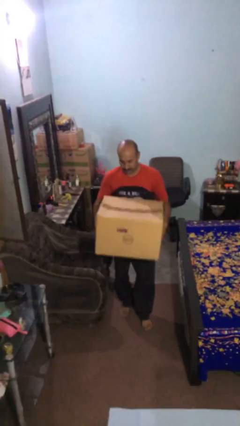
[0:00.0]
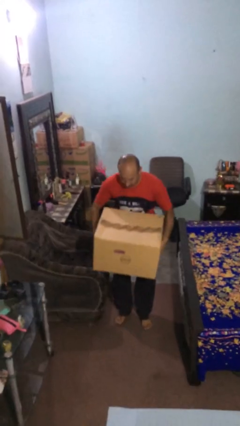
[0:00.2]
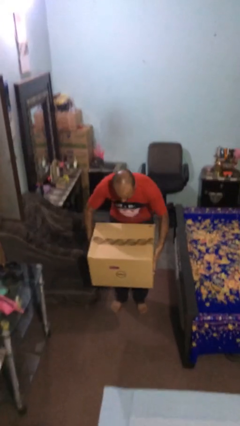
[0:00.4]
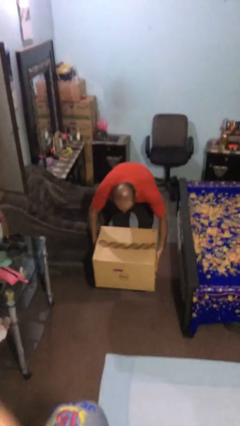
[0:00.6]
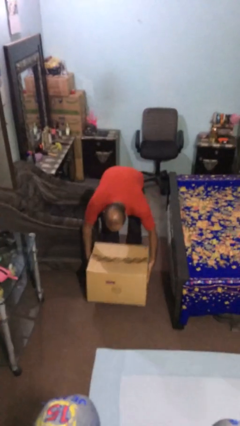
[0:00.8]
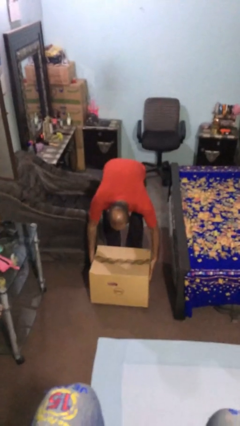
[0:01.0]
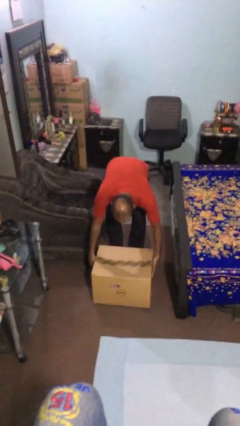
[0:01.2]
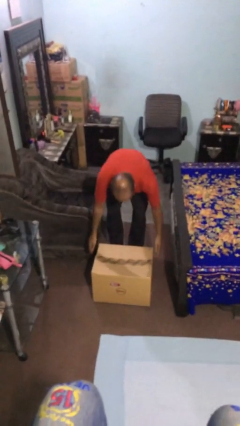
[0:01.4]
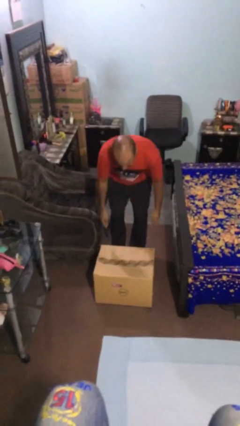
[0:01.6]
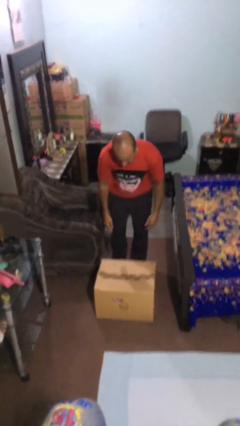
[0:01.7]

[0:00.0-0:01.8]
person puts down object on floor

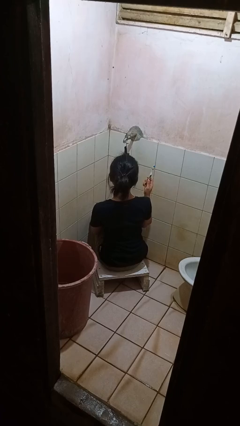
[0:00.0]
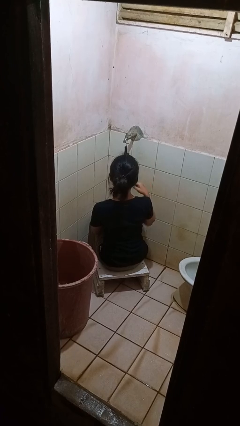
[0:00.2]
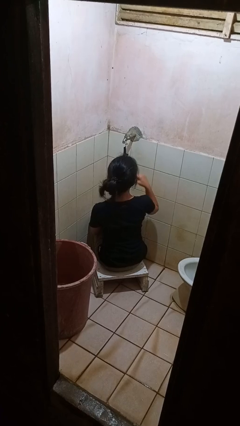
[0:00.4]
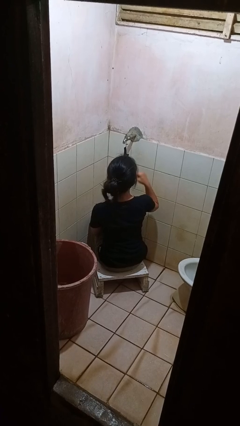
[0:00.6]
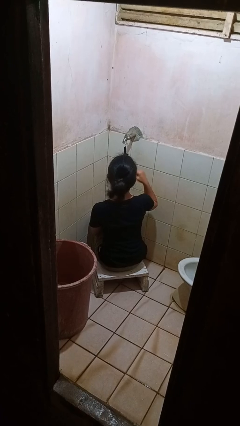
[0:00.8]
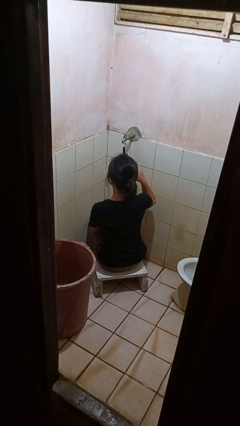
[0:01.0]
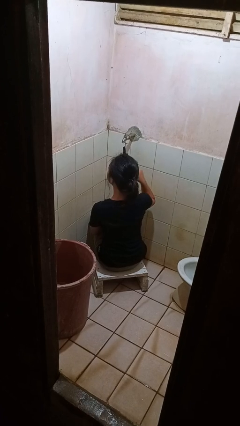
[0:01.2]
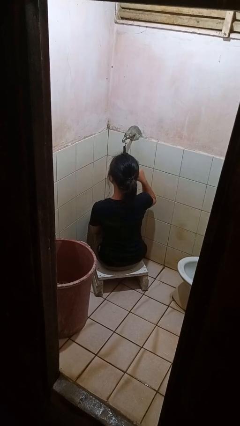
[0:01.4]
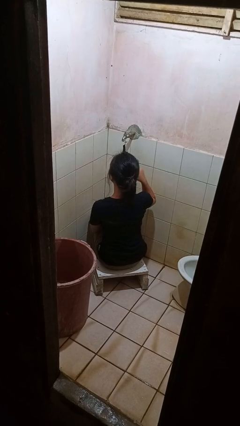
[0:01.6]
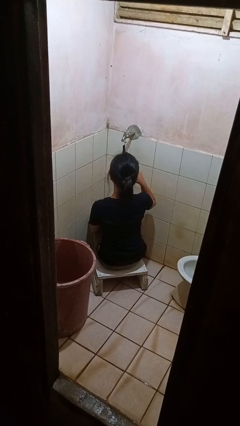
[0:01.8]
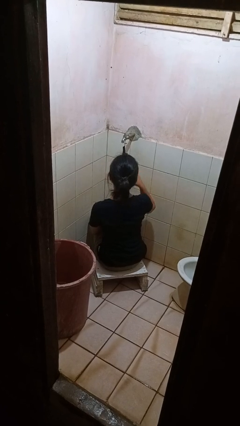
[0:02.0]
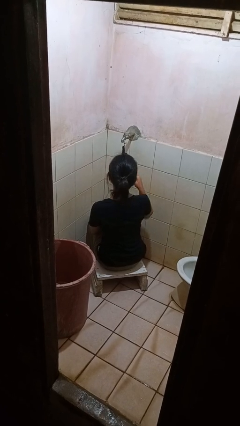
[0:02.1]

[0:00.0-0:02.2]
person brushes teeth

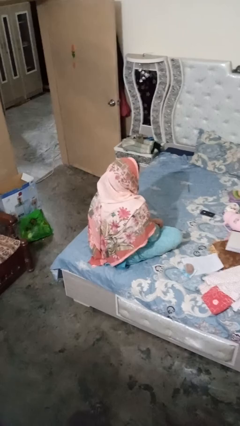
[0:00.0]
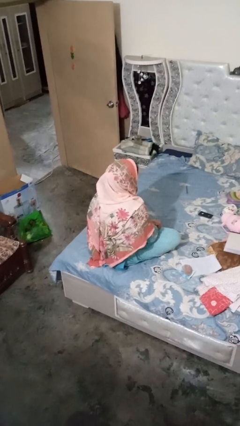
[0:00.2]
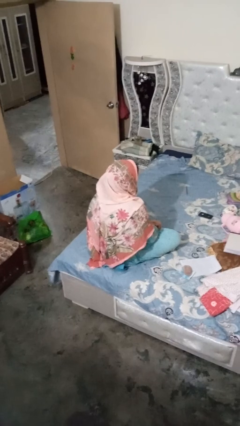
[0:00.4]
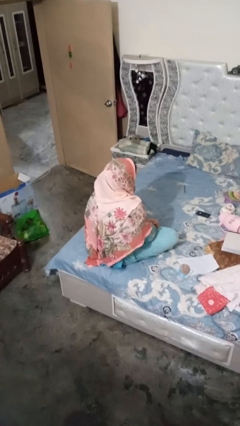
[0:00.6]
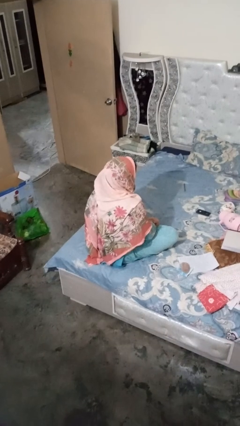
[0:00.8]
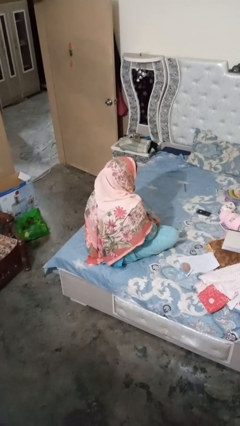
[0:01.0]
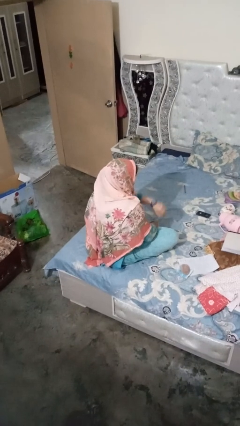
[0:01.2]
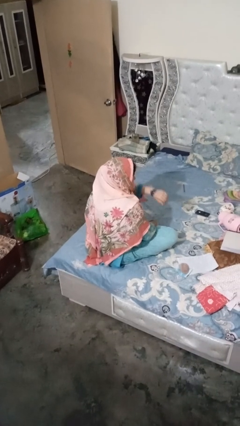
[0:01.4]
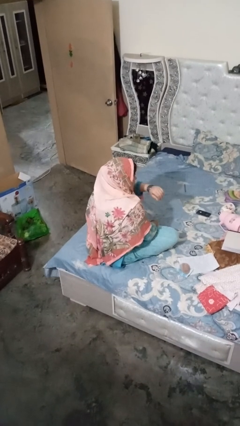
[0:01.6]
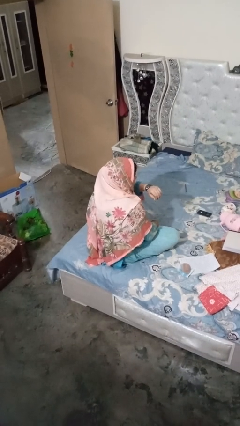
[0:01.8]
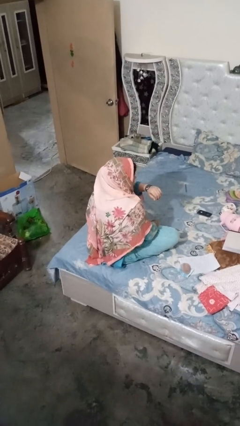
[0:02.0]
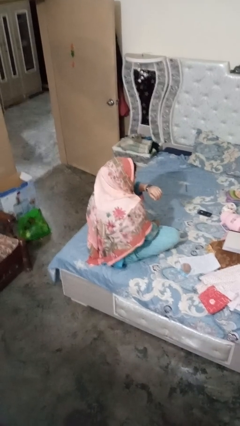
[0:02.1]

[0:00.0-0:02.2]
person gestures watch closely

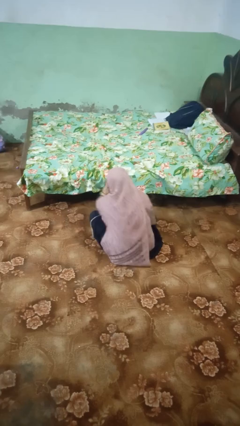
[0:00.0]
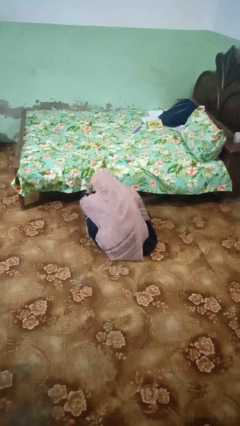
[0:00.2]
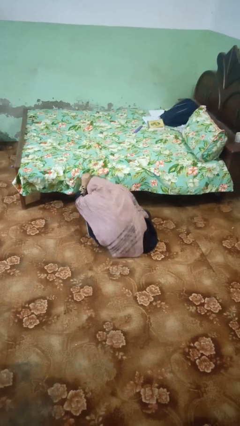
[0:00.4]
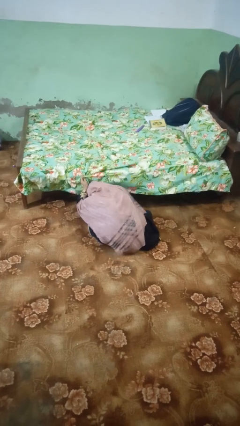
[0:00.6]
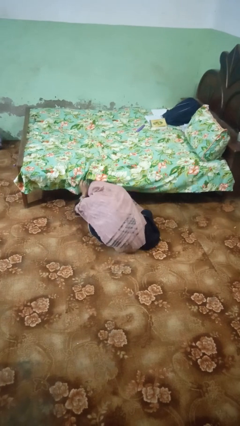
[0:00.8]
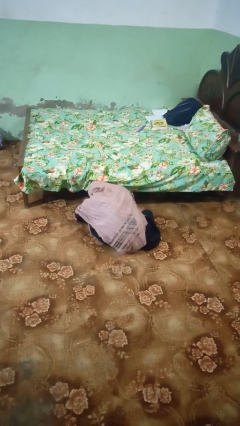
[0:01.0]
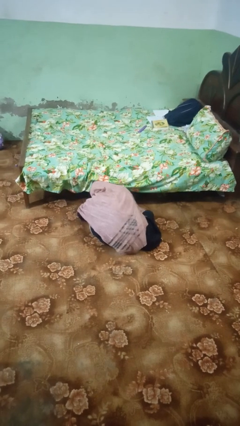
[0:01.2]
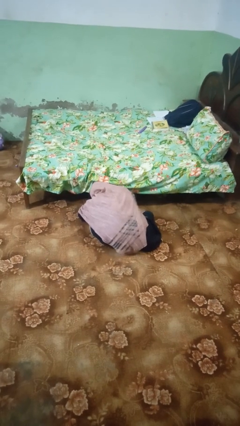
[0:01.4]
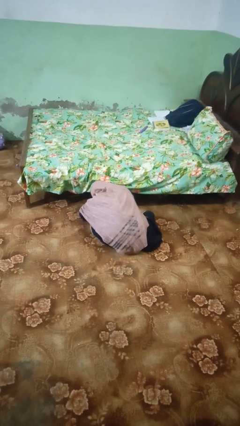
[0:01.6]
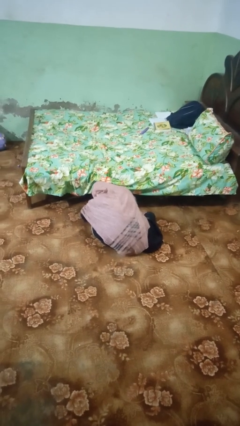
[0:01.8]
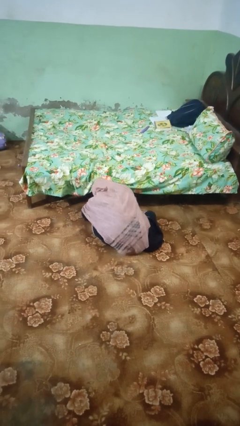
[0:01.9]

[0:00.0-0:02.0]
person searches under bed

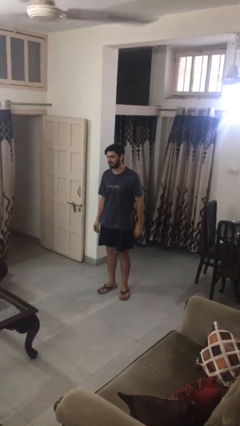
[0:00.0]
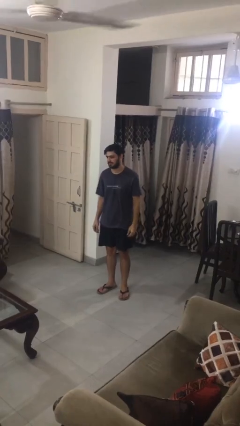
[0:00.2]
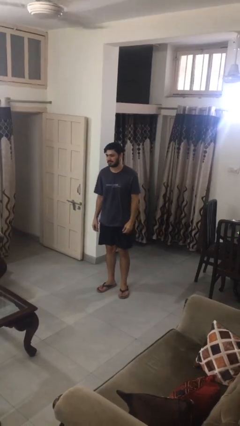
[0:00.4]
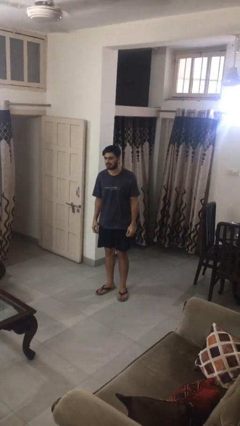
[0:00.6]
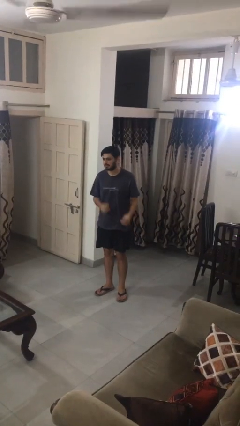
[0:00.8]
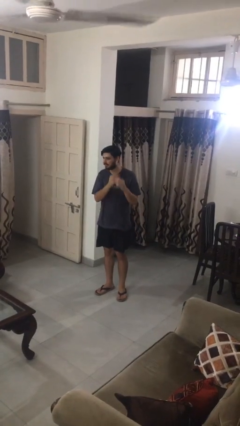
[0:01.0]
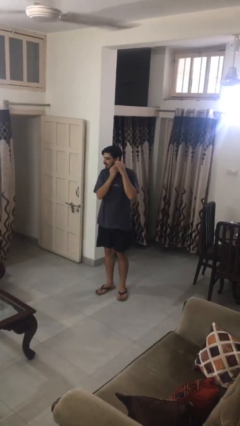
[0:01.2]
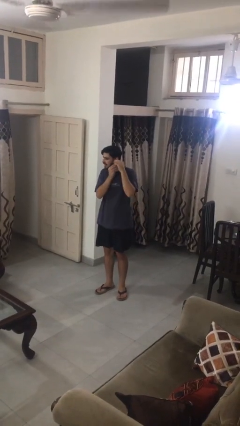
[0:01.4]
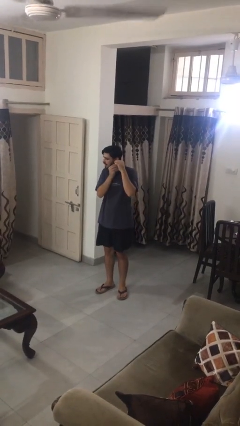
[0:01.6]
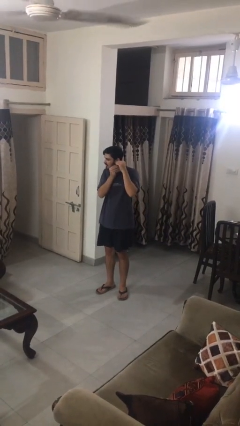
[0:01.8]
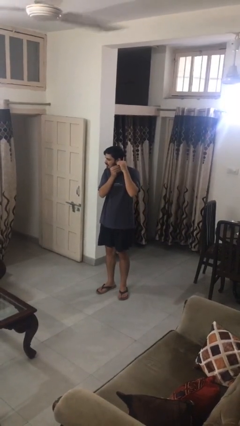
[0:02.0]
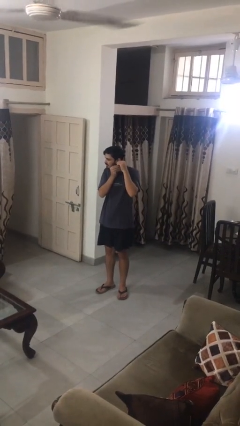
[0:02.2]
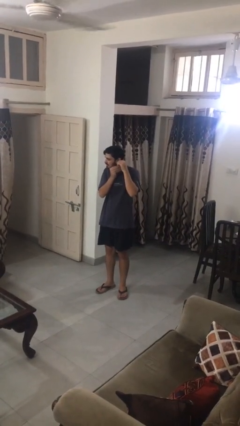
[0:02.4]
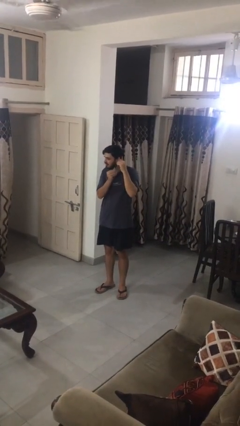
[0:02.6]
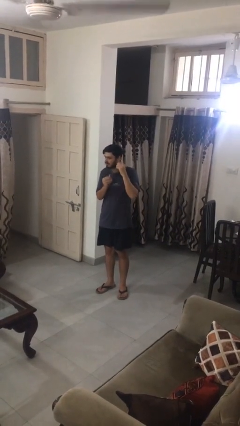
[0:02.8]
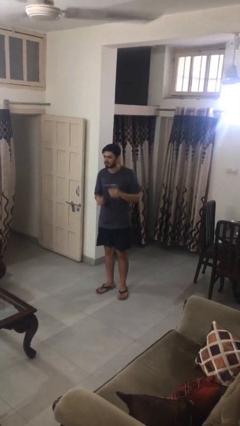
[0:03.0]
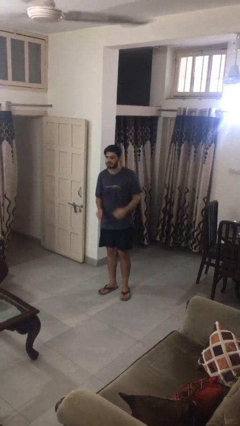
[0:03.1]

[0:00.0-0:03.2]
person takes off earrings

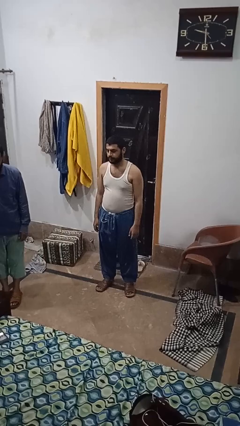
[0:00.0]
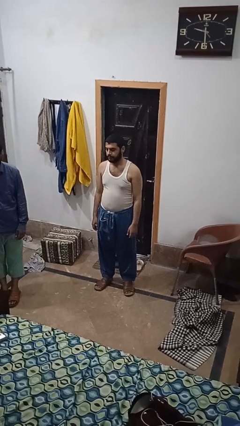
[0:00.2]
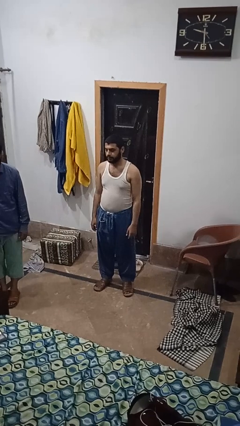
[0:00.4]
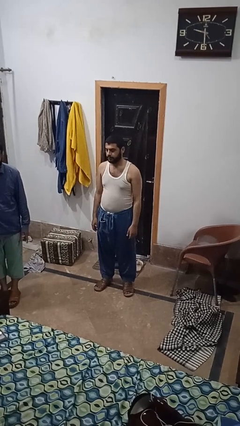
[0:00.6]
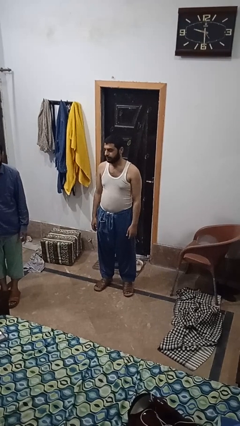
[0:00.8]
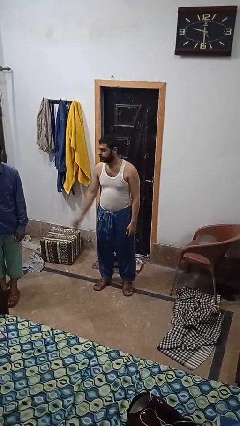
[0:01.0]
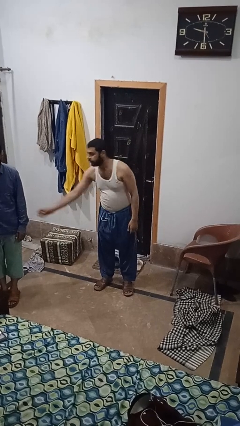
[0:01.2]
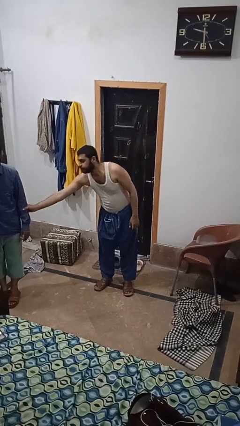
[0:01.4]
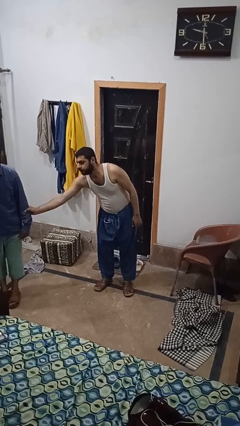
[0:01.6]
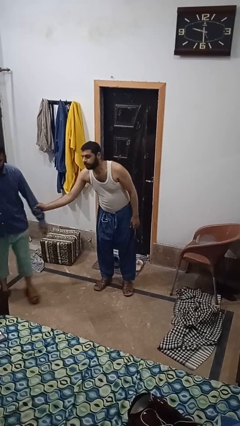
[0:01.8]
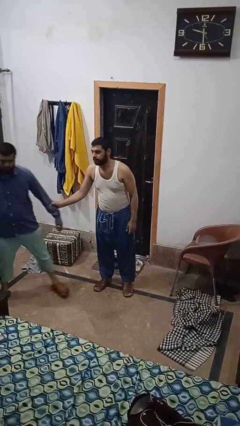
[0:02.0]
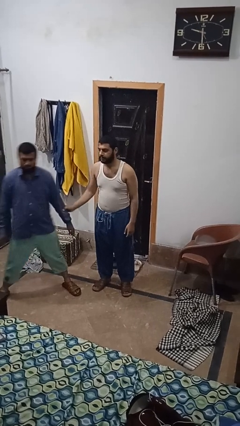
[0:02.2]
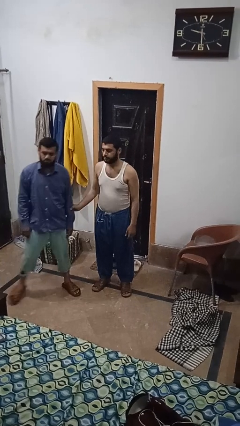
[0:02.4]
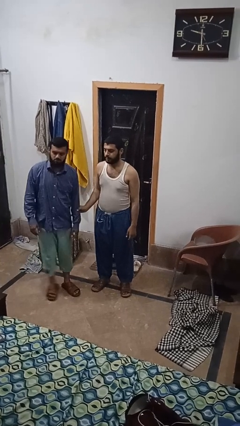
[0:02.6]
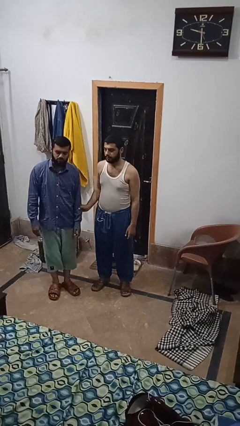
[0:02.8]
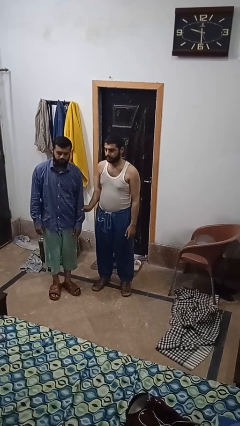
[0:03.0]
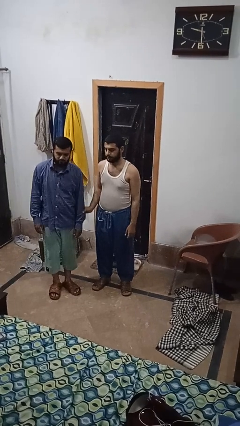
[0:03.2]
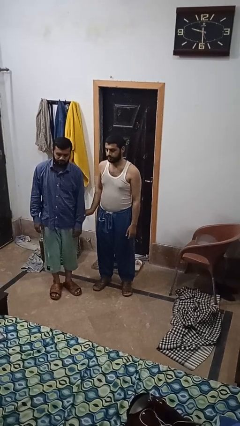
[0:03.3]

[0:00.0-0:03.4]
person grabs person by forearm

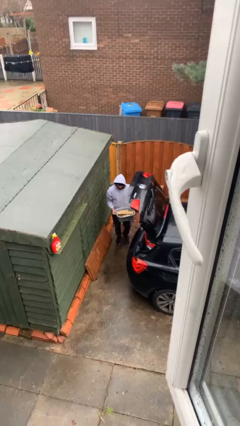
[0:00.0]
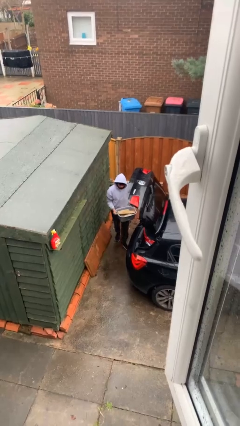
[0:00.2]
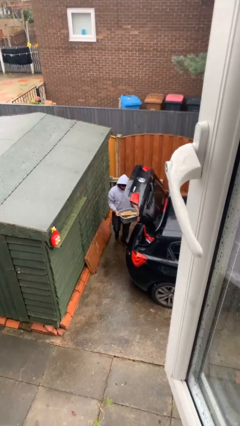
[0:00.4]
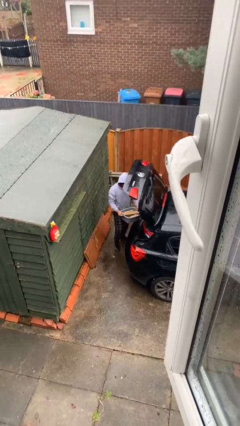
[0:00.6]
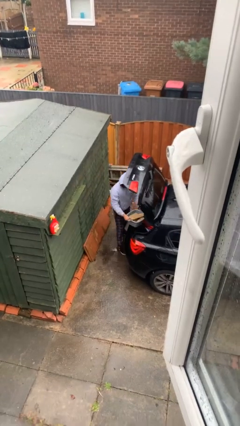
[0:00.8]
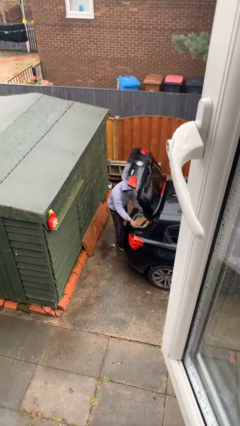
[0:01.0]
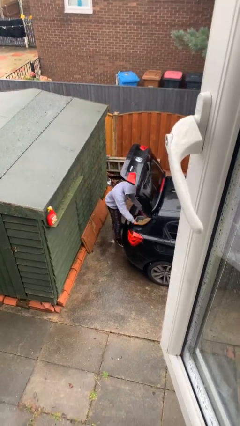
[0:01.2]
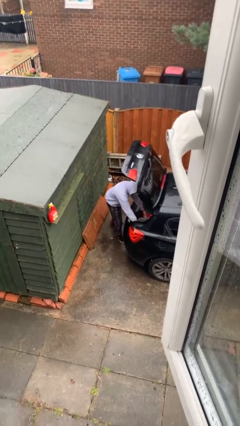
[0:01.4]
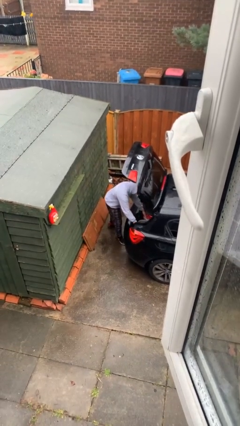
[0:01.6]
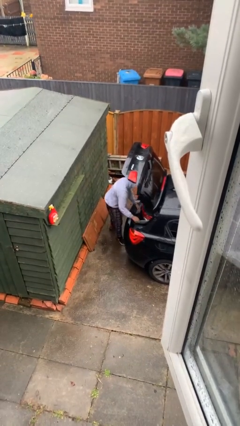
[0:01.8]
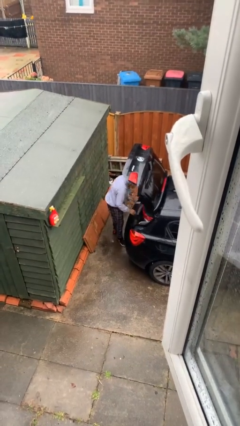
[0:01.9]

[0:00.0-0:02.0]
person loads car

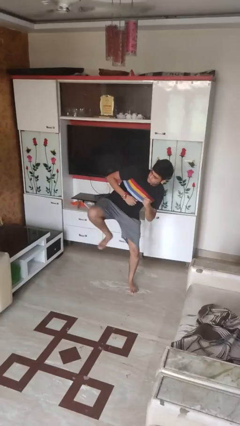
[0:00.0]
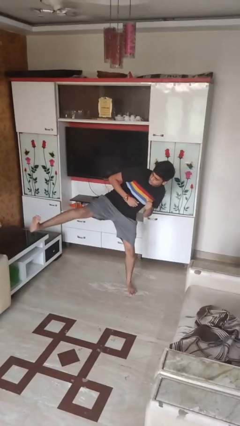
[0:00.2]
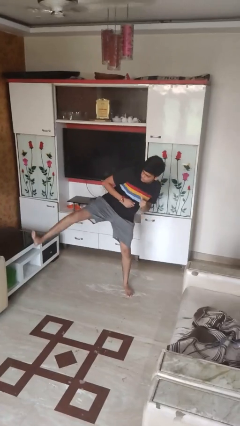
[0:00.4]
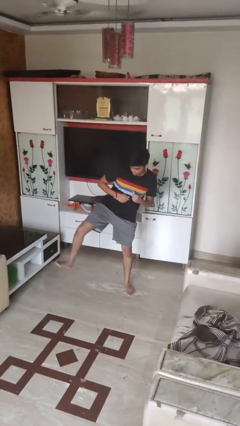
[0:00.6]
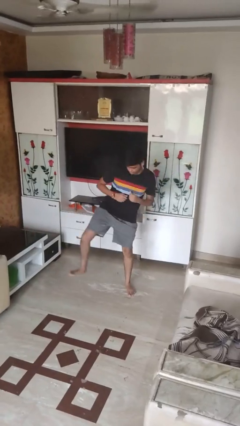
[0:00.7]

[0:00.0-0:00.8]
person karate kicks
